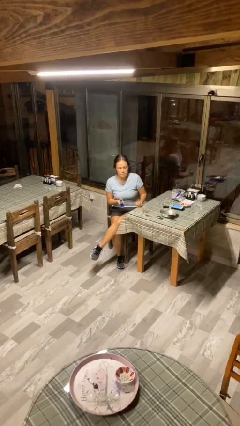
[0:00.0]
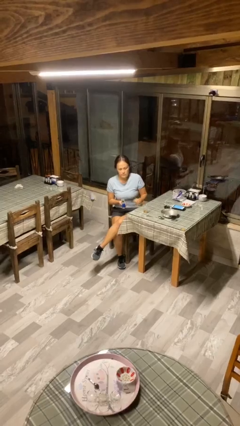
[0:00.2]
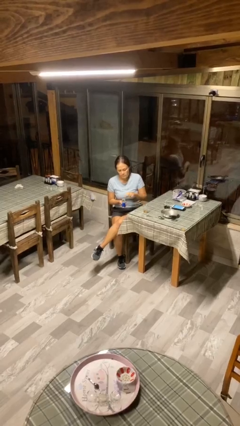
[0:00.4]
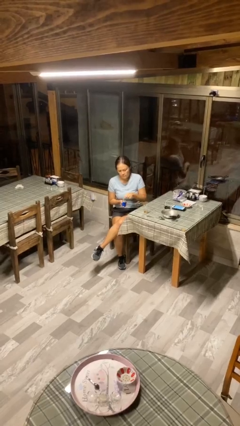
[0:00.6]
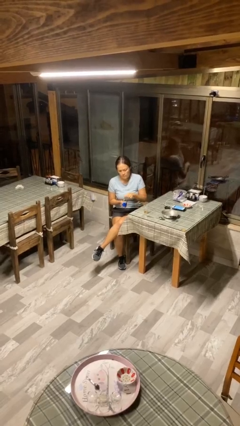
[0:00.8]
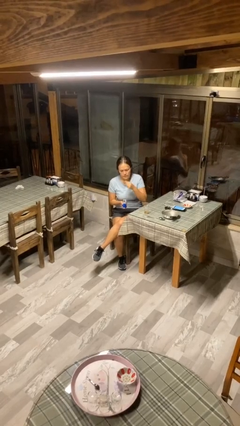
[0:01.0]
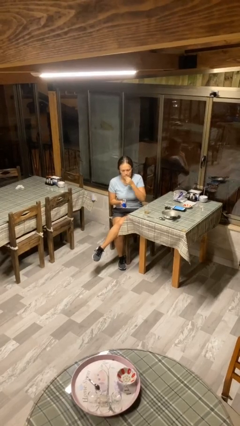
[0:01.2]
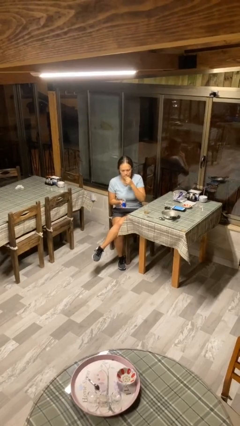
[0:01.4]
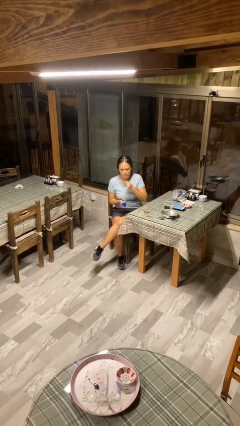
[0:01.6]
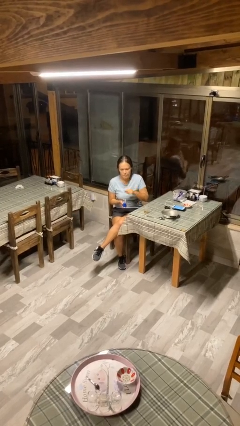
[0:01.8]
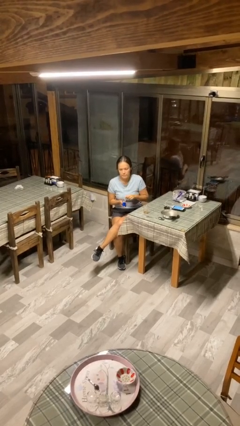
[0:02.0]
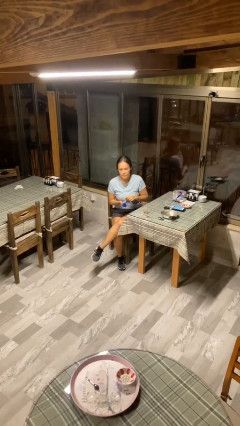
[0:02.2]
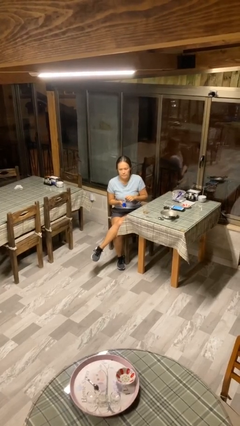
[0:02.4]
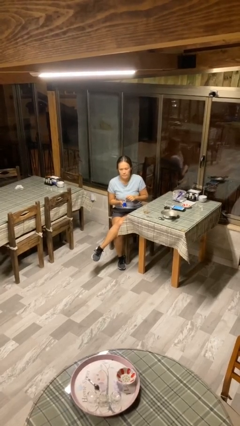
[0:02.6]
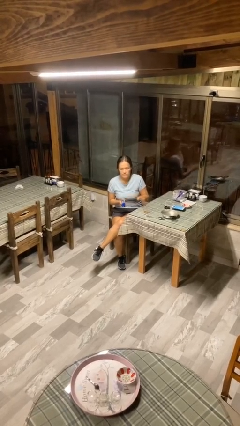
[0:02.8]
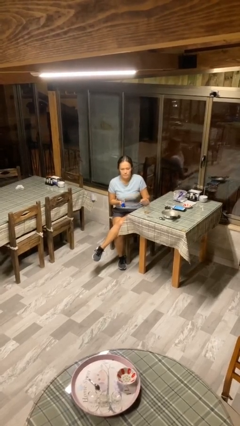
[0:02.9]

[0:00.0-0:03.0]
person takes medicine pills

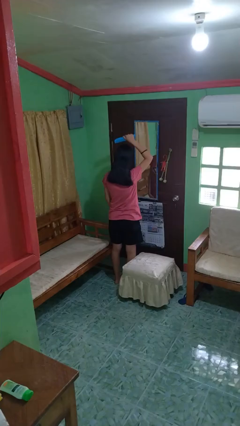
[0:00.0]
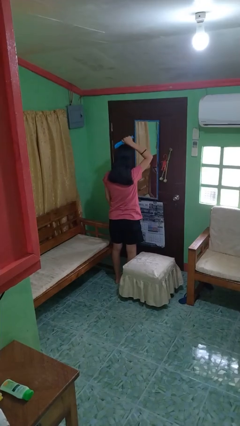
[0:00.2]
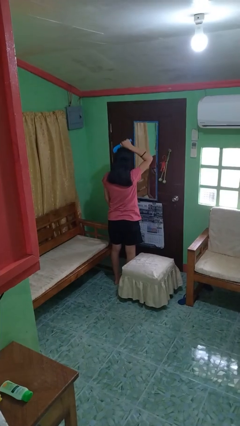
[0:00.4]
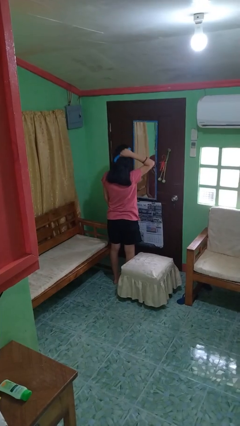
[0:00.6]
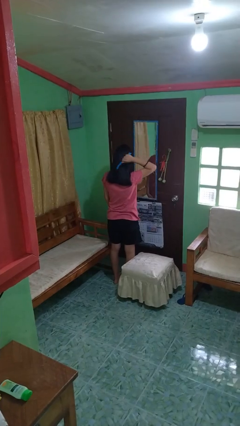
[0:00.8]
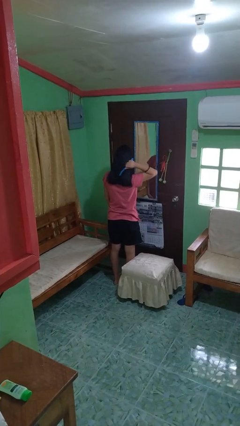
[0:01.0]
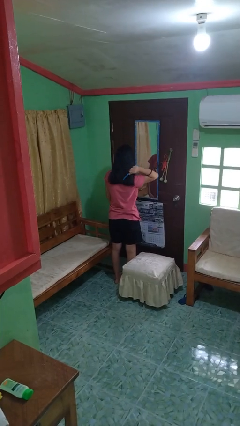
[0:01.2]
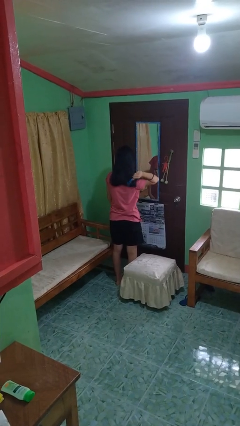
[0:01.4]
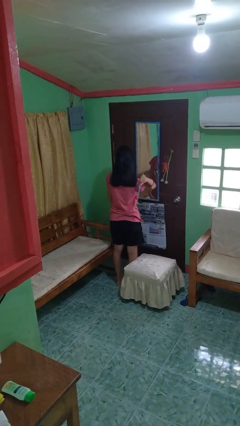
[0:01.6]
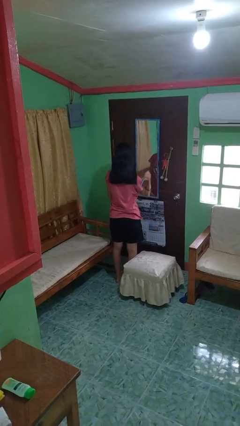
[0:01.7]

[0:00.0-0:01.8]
person brushes hair

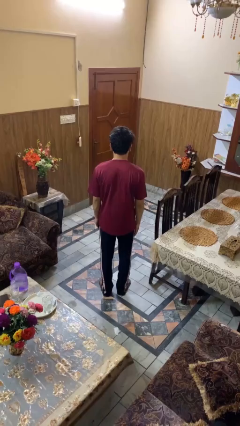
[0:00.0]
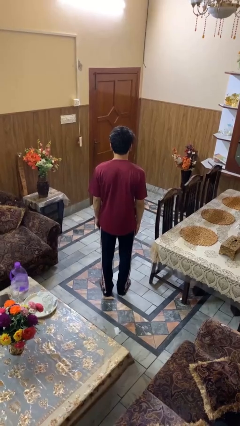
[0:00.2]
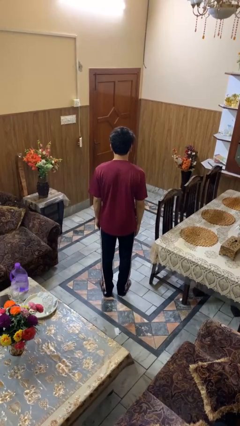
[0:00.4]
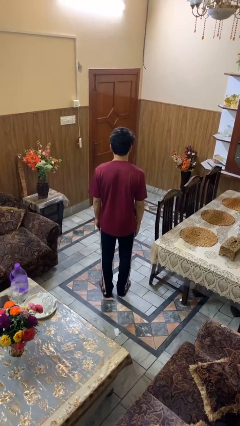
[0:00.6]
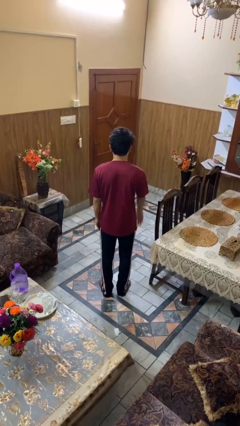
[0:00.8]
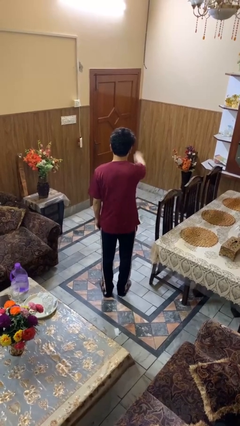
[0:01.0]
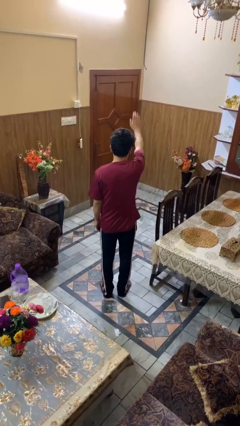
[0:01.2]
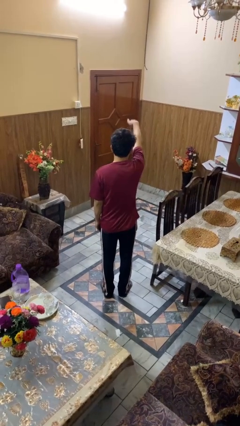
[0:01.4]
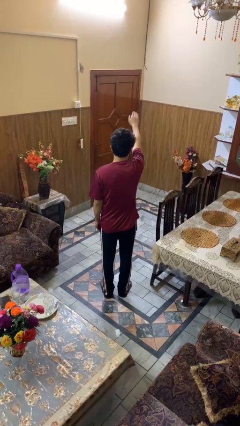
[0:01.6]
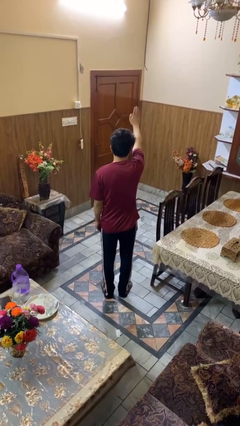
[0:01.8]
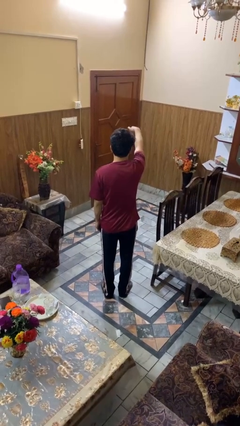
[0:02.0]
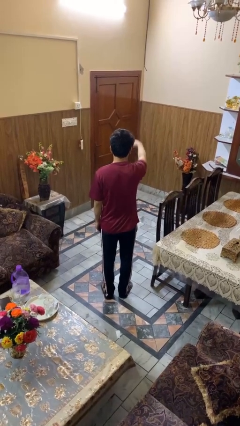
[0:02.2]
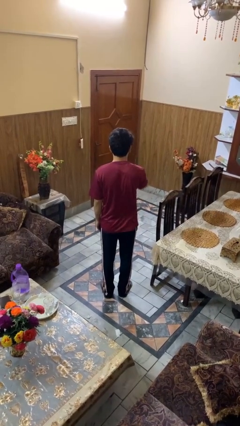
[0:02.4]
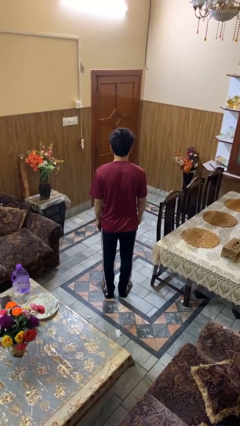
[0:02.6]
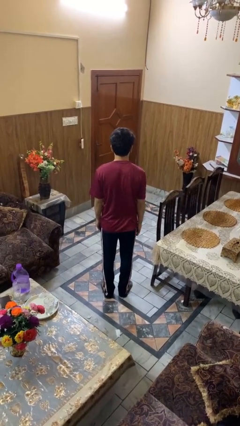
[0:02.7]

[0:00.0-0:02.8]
person gestures come here

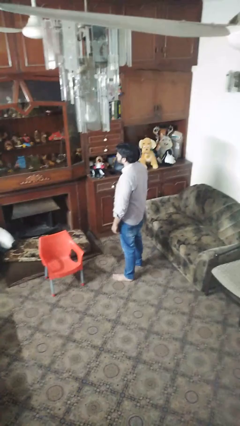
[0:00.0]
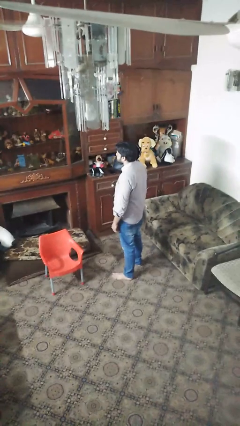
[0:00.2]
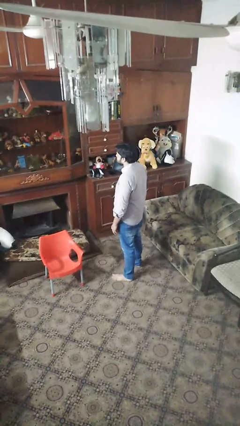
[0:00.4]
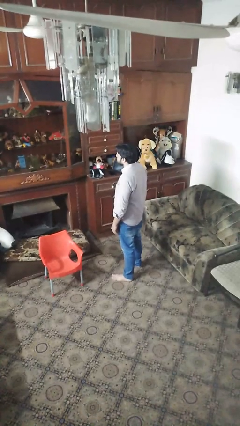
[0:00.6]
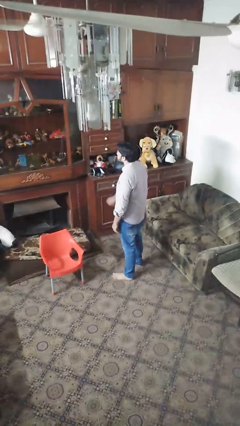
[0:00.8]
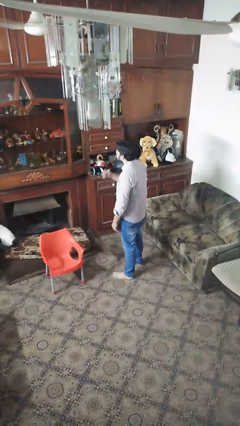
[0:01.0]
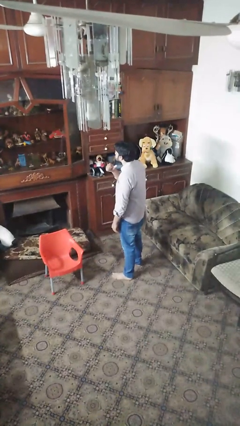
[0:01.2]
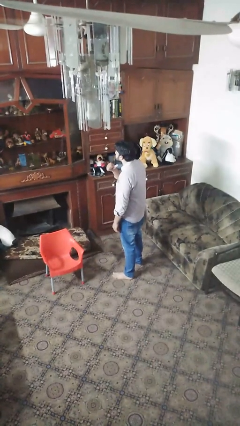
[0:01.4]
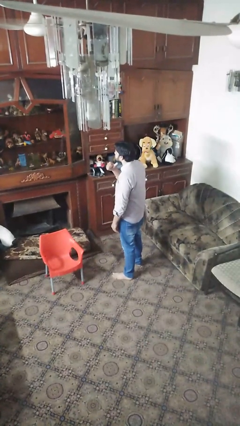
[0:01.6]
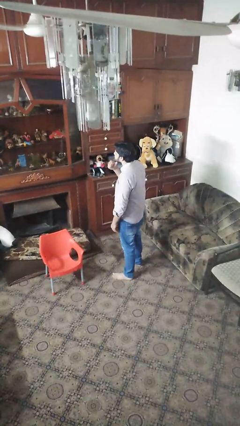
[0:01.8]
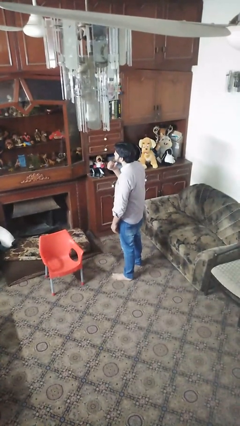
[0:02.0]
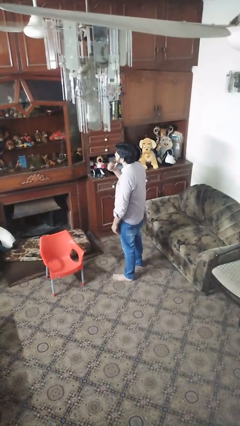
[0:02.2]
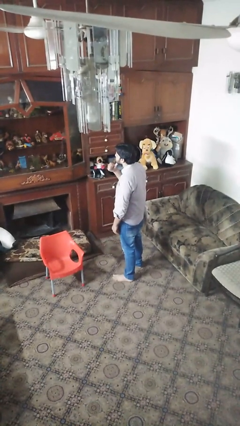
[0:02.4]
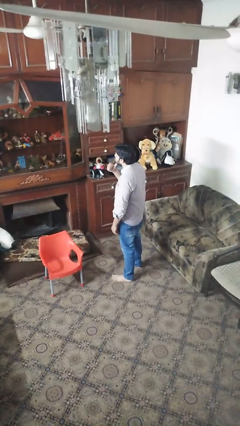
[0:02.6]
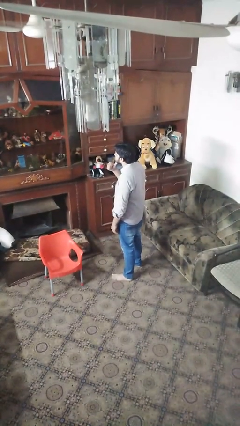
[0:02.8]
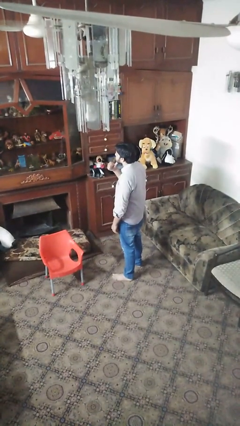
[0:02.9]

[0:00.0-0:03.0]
person gestures cut

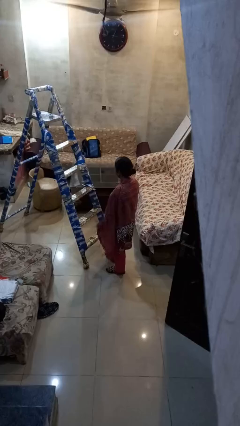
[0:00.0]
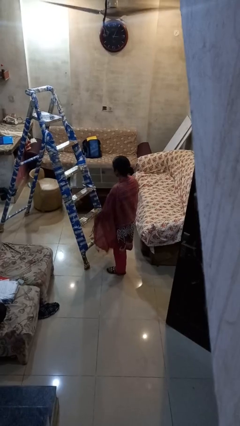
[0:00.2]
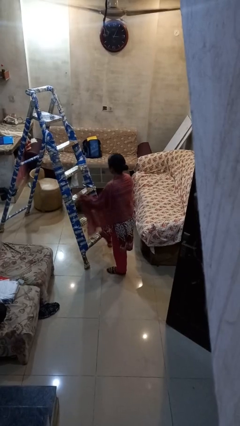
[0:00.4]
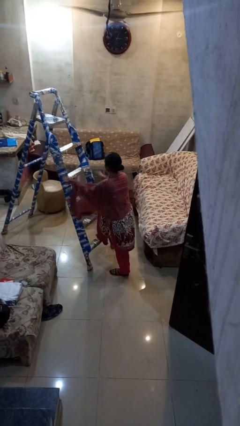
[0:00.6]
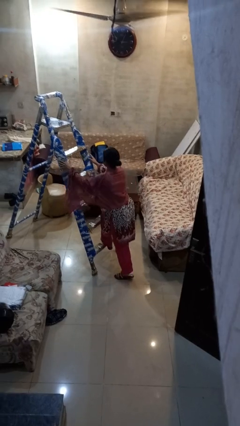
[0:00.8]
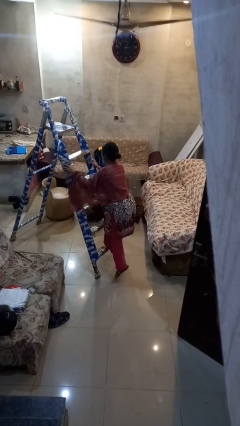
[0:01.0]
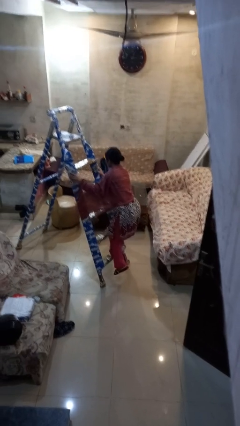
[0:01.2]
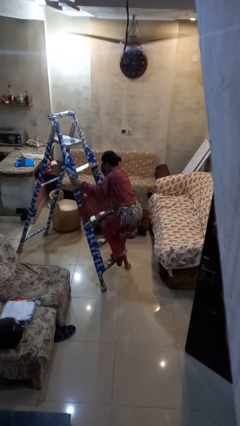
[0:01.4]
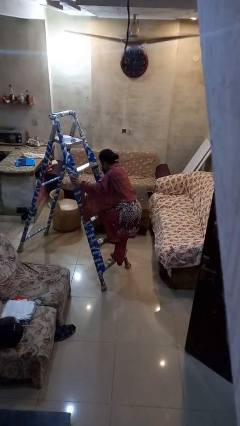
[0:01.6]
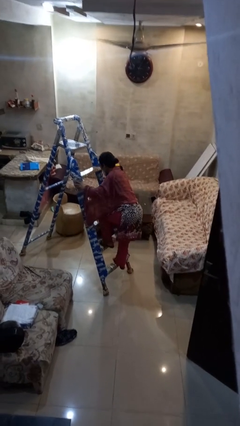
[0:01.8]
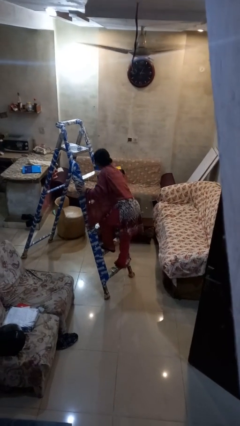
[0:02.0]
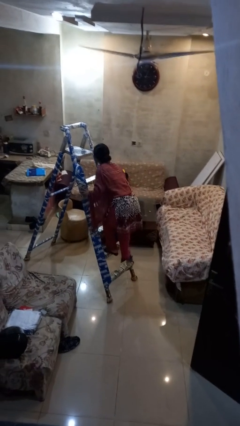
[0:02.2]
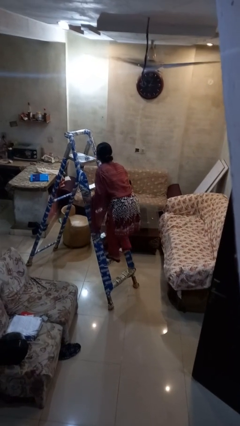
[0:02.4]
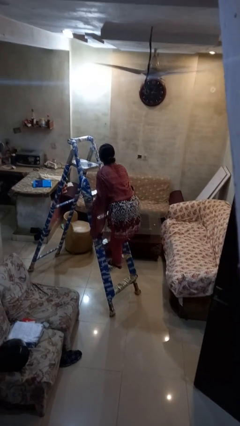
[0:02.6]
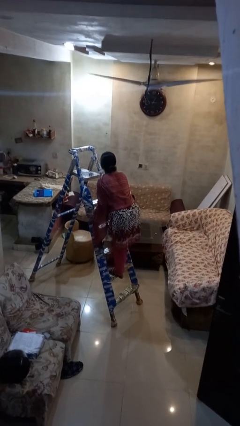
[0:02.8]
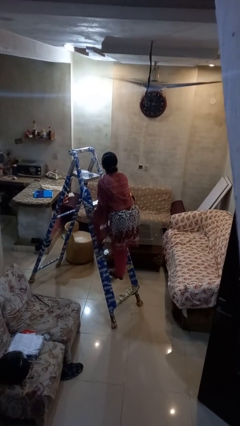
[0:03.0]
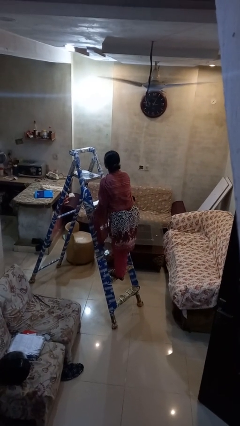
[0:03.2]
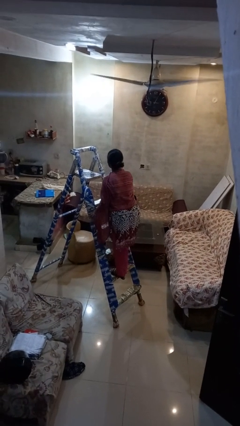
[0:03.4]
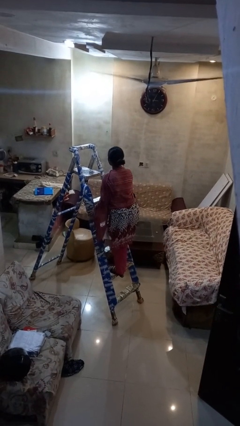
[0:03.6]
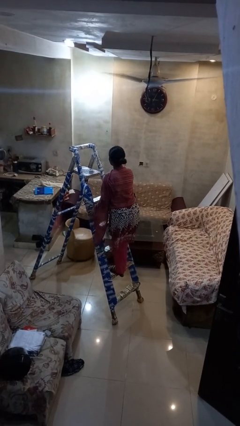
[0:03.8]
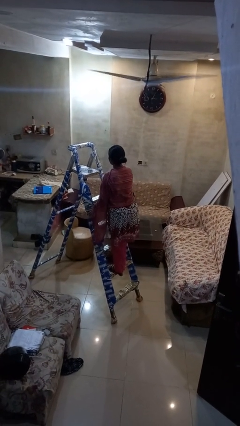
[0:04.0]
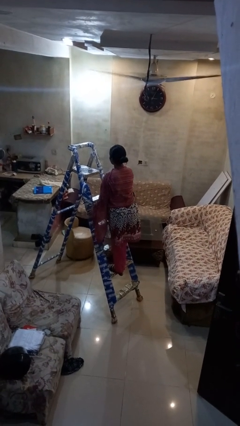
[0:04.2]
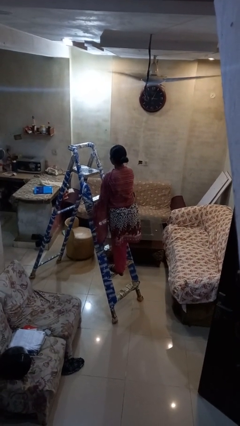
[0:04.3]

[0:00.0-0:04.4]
person climbs up ladder

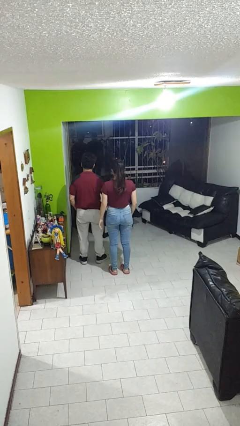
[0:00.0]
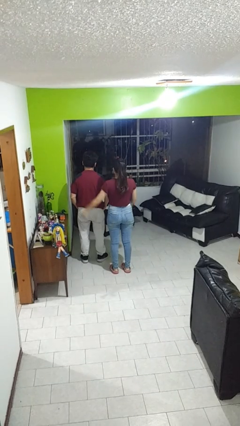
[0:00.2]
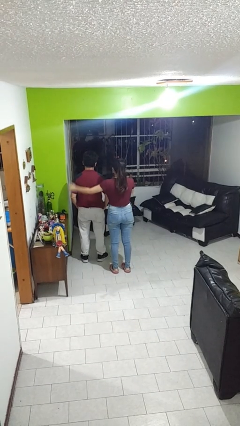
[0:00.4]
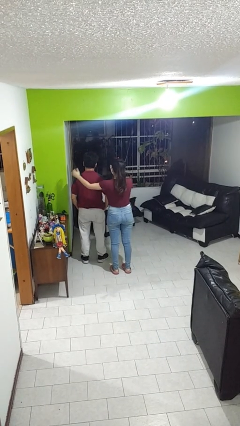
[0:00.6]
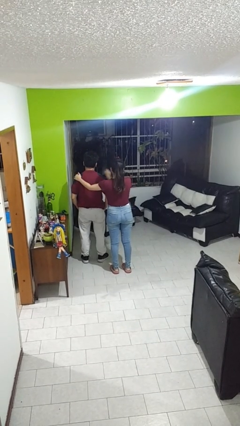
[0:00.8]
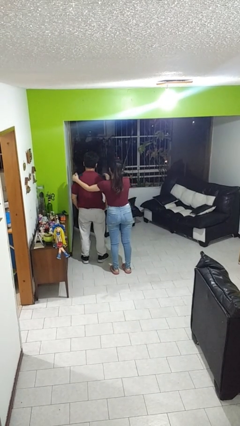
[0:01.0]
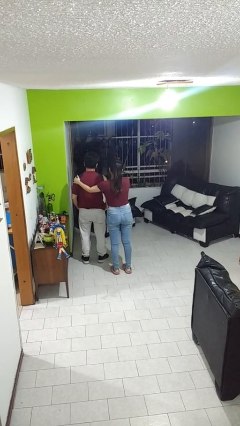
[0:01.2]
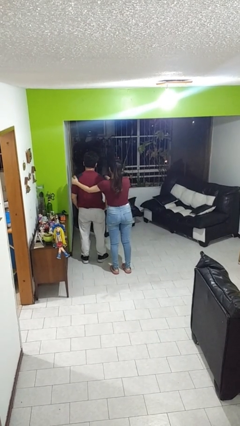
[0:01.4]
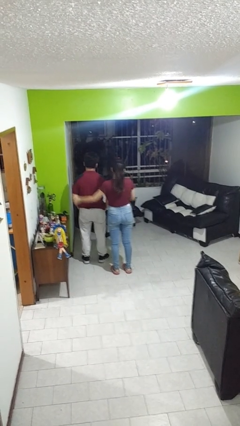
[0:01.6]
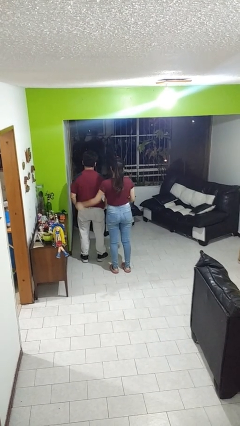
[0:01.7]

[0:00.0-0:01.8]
person pounds shoulders of person

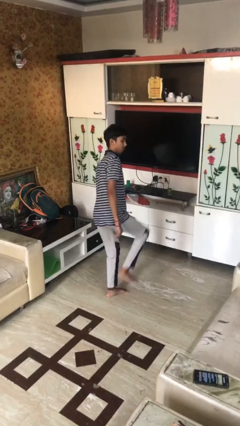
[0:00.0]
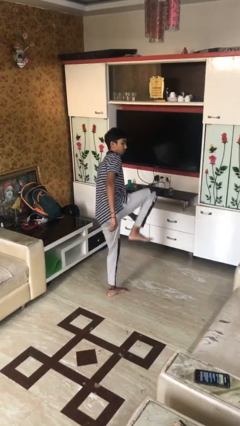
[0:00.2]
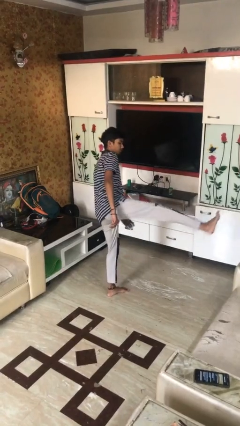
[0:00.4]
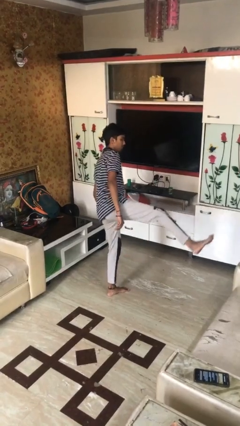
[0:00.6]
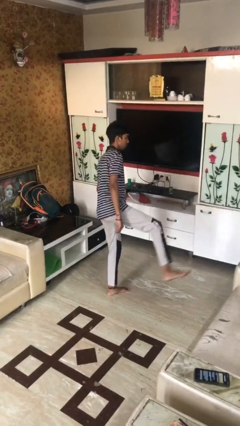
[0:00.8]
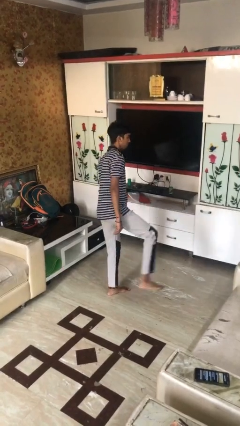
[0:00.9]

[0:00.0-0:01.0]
person karate kicks
